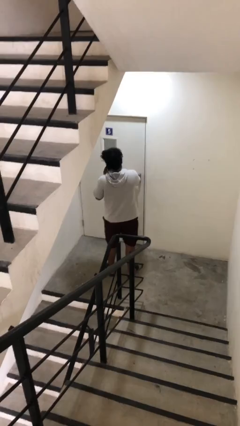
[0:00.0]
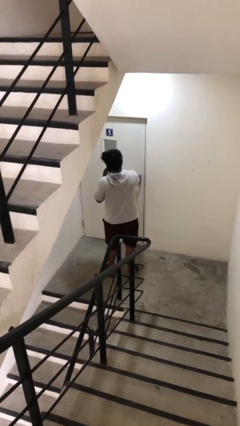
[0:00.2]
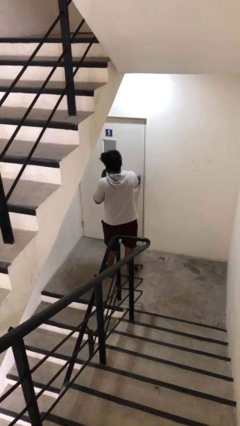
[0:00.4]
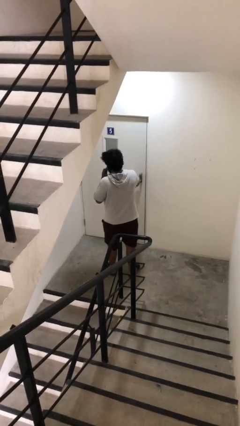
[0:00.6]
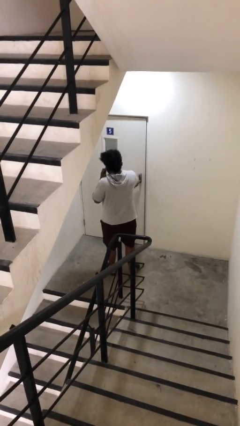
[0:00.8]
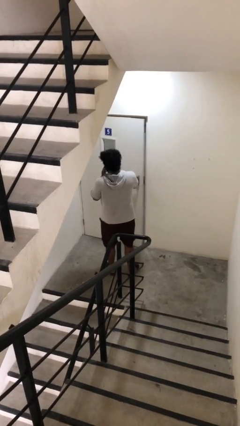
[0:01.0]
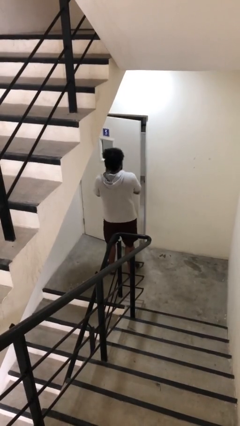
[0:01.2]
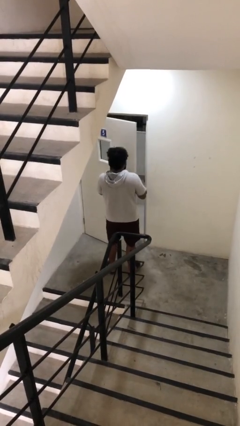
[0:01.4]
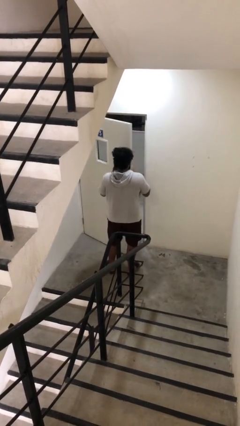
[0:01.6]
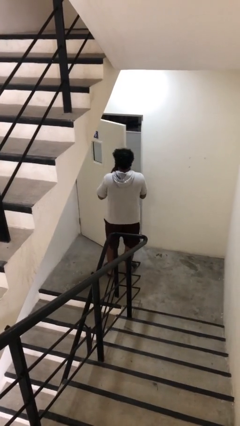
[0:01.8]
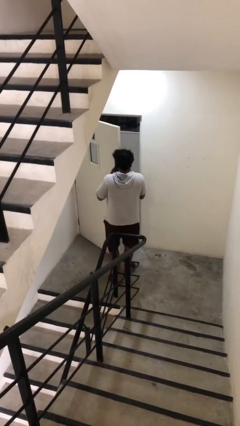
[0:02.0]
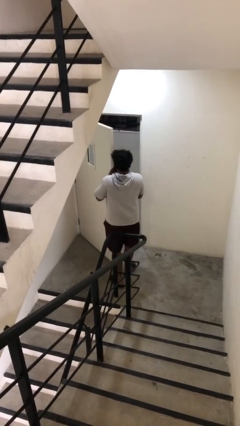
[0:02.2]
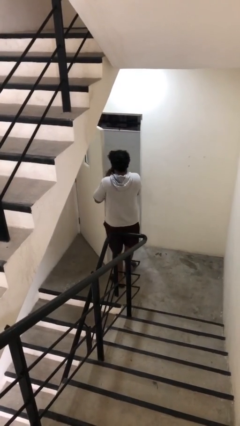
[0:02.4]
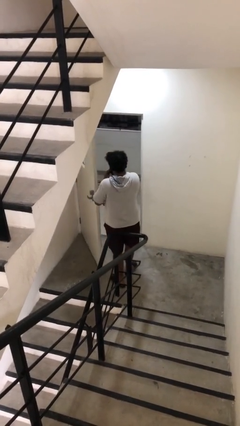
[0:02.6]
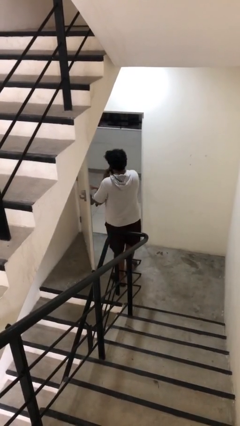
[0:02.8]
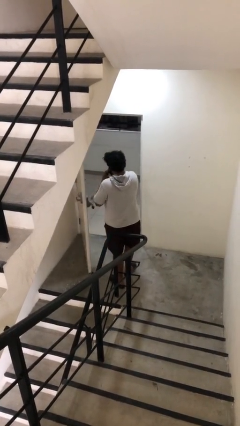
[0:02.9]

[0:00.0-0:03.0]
person opens facility door

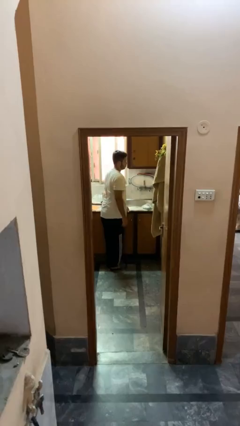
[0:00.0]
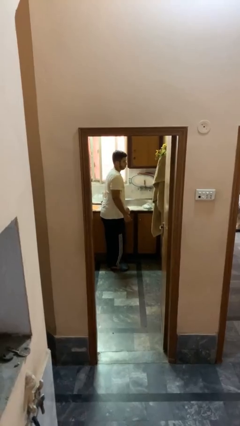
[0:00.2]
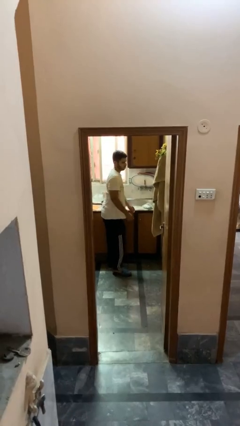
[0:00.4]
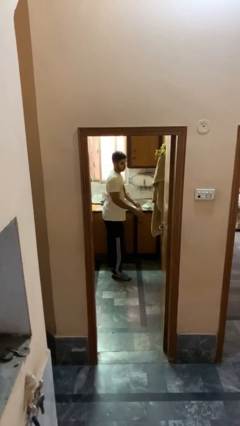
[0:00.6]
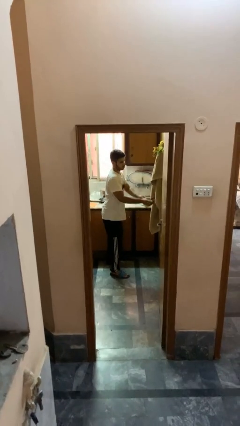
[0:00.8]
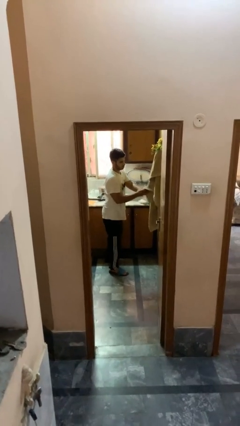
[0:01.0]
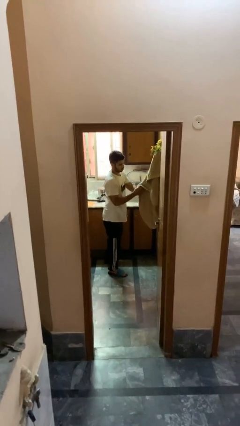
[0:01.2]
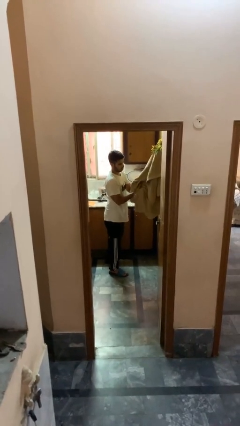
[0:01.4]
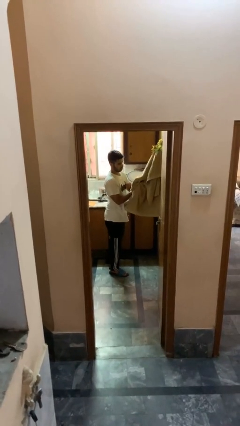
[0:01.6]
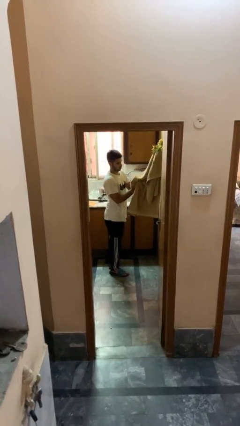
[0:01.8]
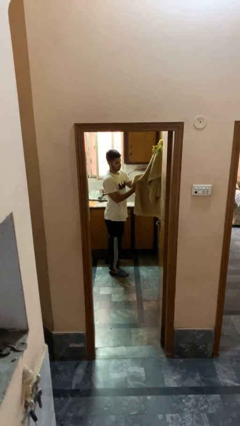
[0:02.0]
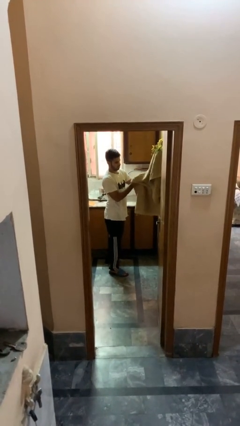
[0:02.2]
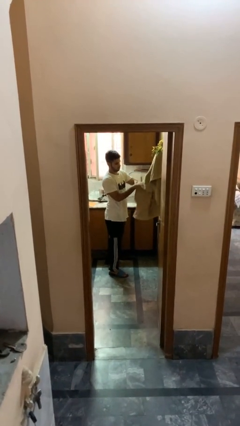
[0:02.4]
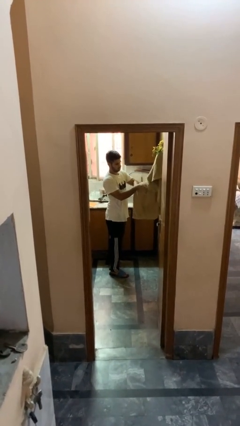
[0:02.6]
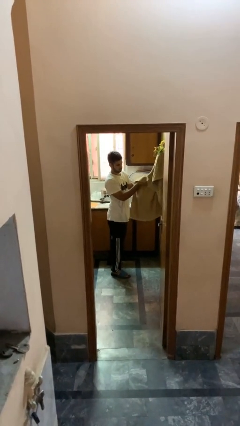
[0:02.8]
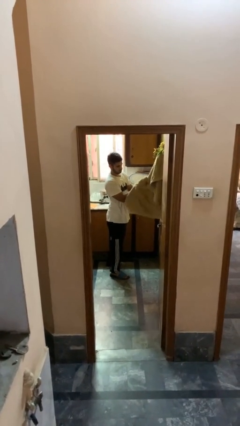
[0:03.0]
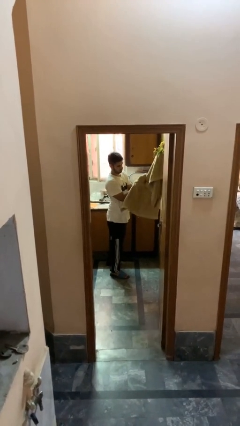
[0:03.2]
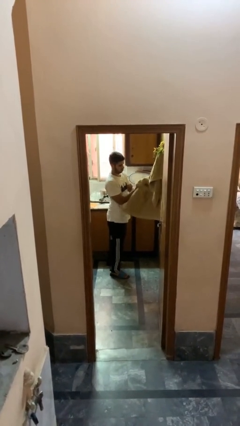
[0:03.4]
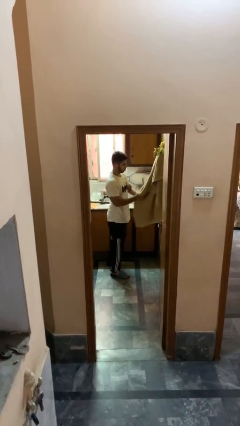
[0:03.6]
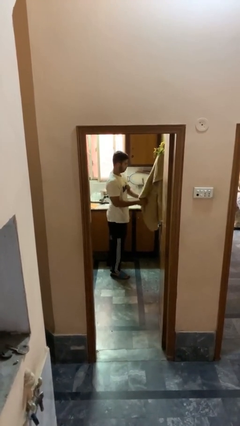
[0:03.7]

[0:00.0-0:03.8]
person dries hands with towel

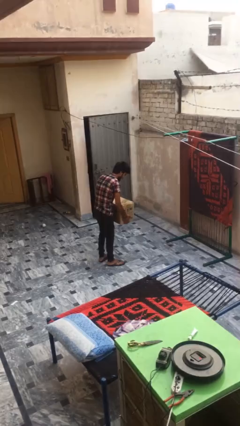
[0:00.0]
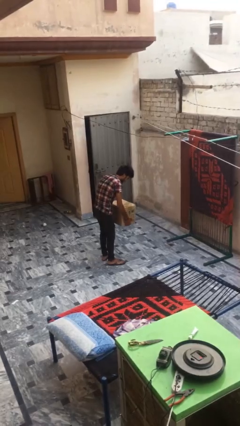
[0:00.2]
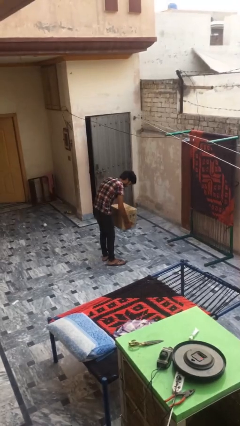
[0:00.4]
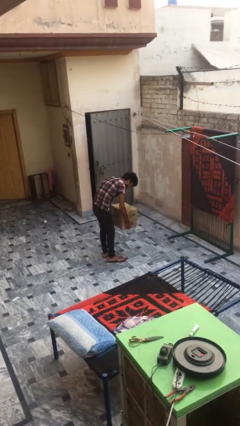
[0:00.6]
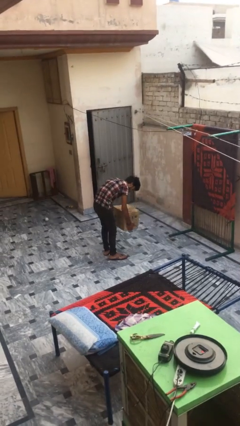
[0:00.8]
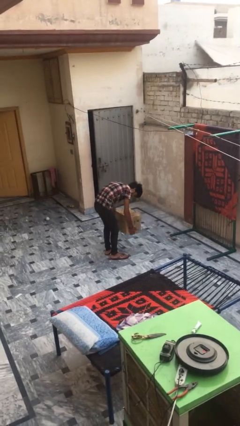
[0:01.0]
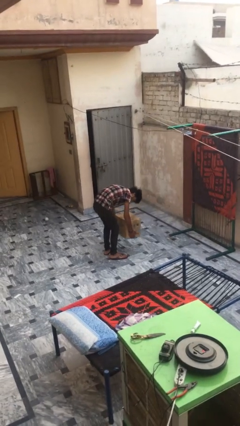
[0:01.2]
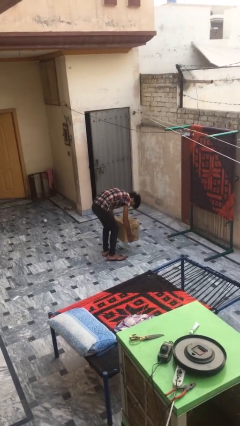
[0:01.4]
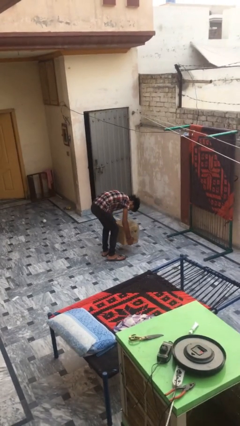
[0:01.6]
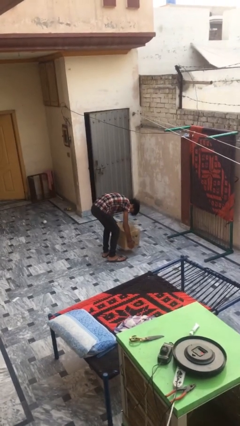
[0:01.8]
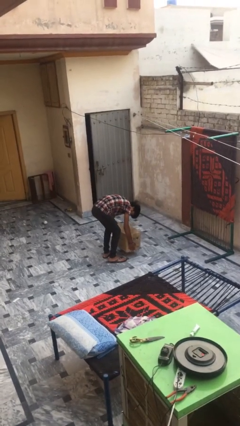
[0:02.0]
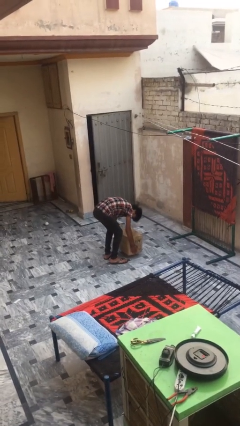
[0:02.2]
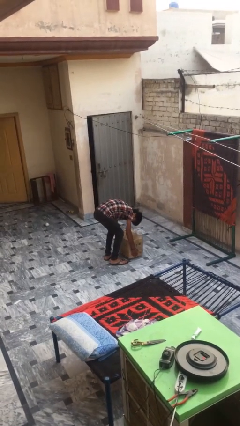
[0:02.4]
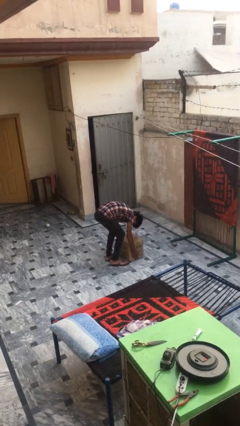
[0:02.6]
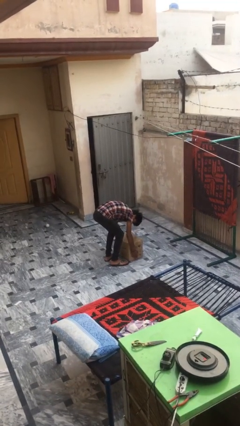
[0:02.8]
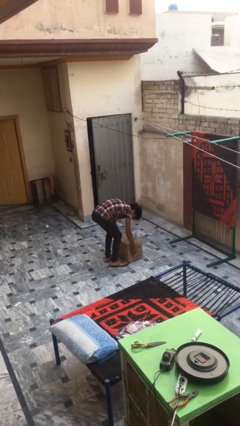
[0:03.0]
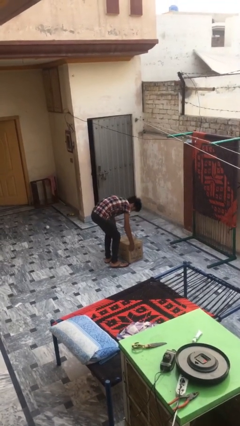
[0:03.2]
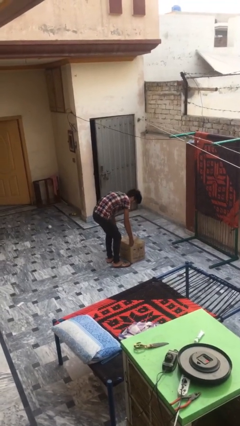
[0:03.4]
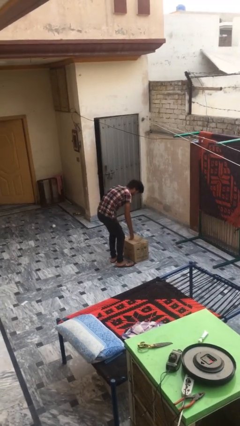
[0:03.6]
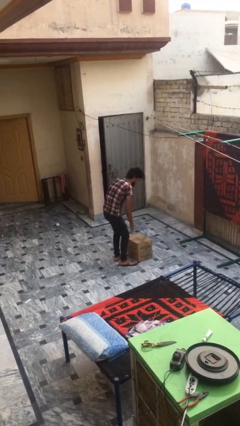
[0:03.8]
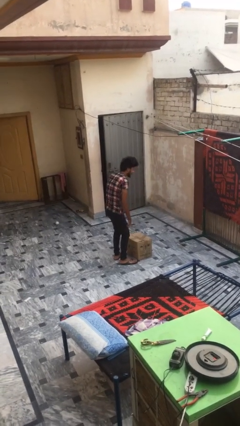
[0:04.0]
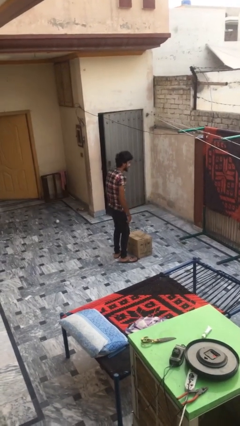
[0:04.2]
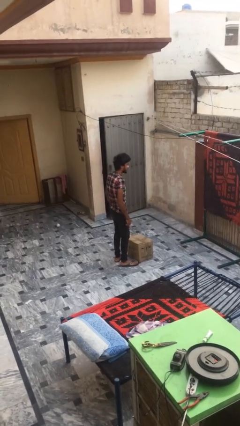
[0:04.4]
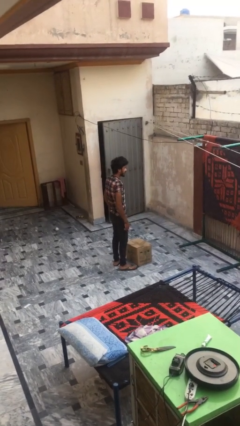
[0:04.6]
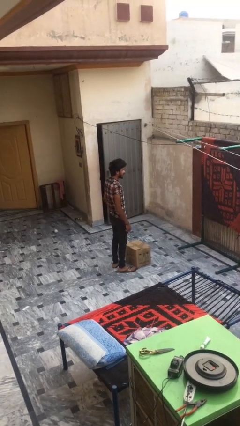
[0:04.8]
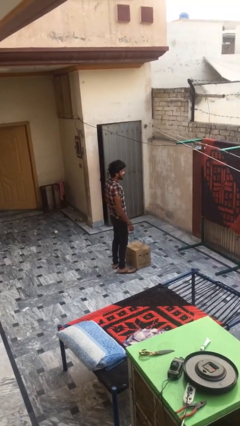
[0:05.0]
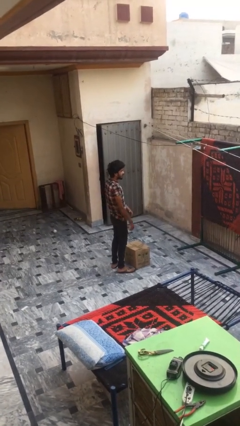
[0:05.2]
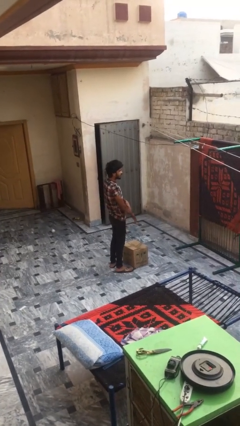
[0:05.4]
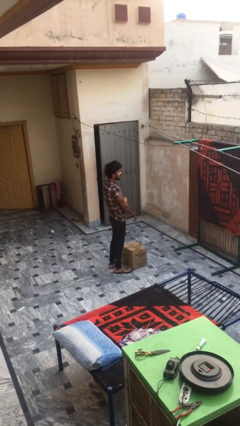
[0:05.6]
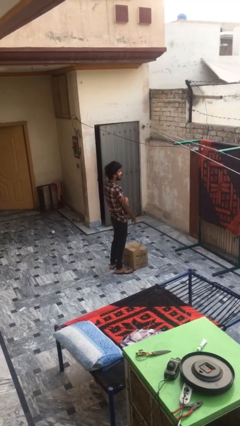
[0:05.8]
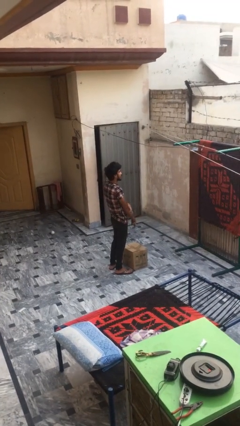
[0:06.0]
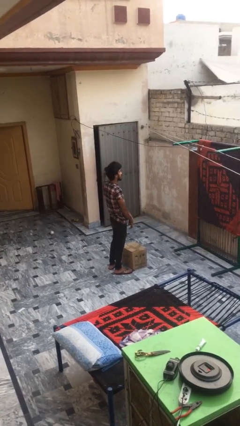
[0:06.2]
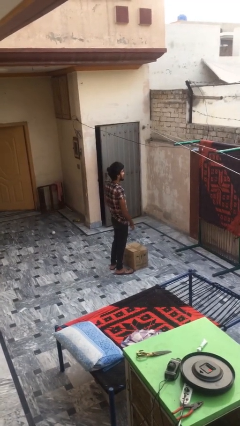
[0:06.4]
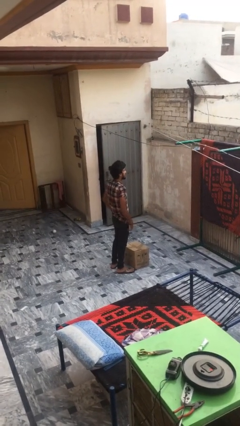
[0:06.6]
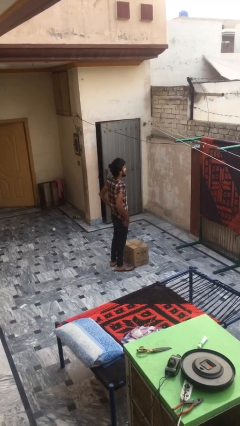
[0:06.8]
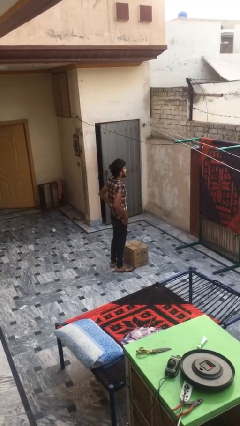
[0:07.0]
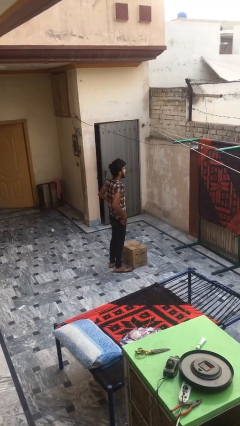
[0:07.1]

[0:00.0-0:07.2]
person puts down object on floor

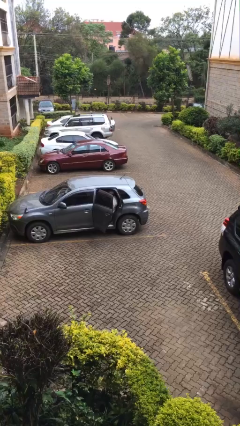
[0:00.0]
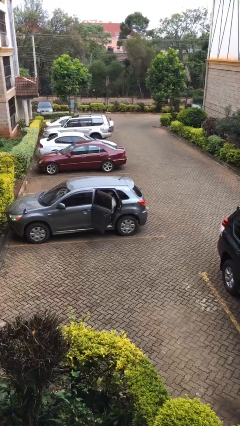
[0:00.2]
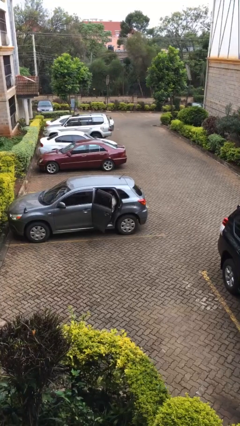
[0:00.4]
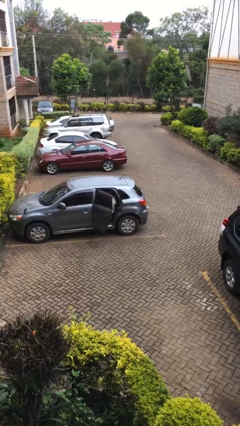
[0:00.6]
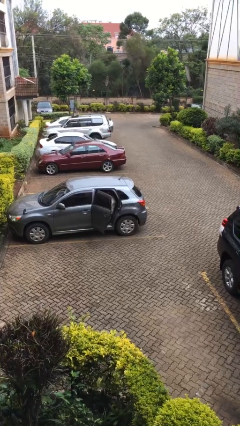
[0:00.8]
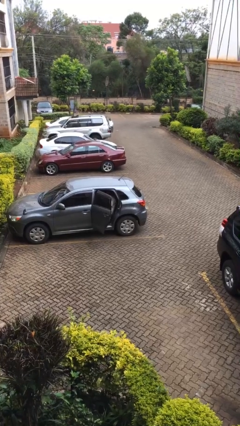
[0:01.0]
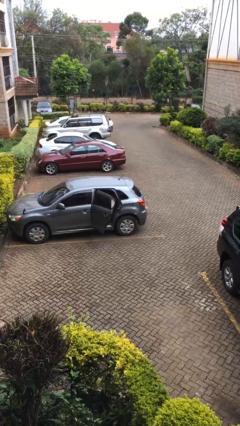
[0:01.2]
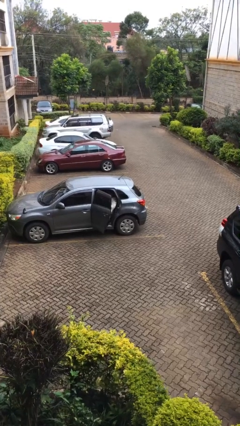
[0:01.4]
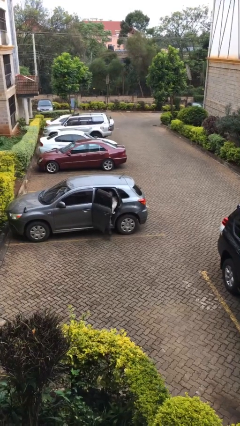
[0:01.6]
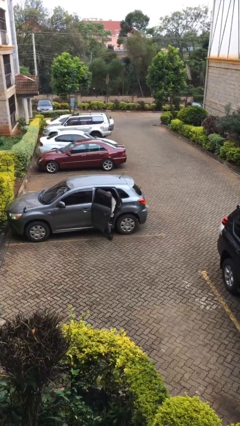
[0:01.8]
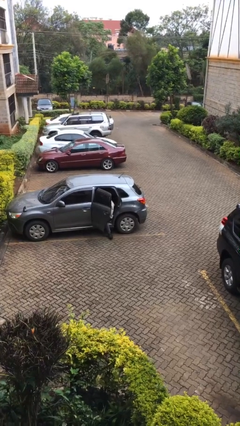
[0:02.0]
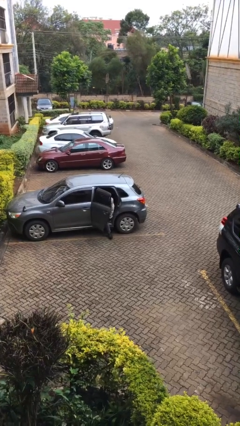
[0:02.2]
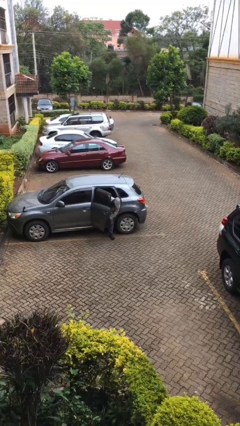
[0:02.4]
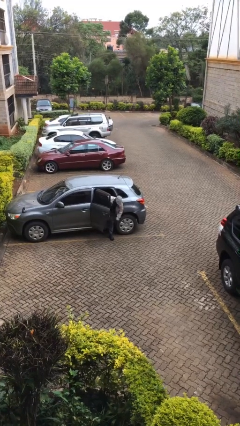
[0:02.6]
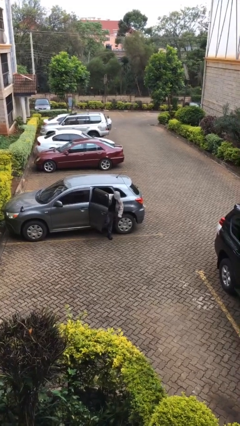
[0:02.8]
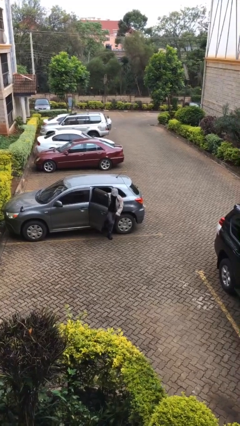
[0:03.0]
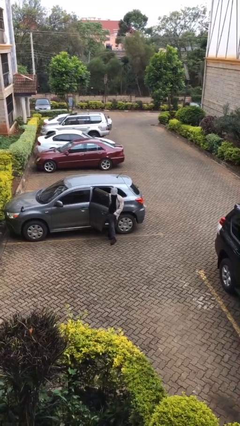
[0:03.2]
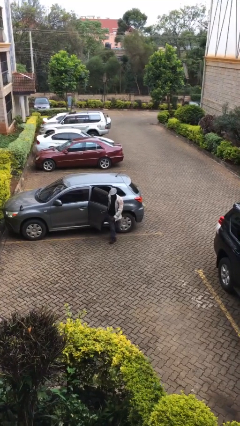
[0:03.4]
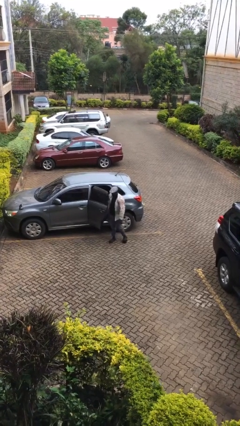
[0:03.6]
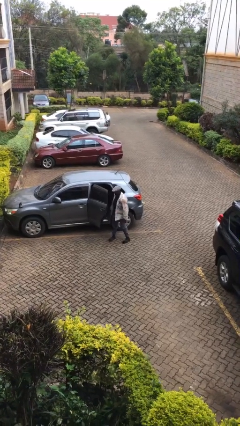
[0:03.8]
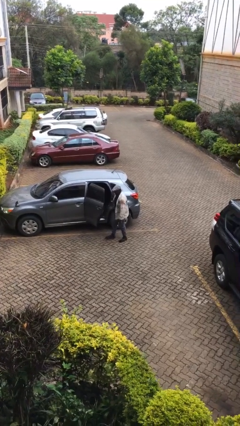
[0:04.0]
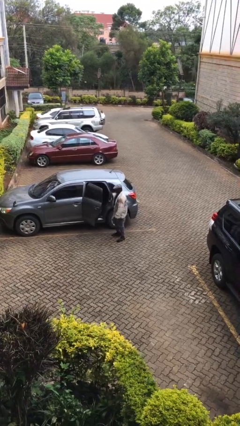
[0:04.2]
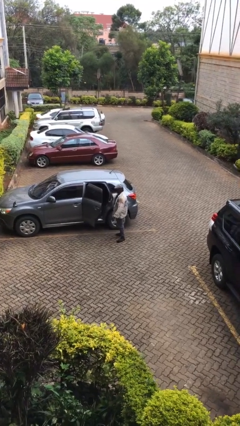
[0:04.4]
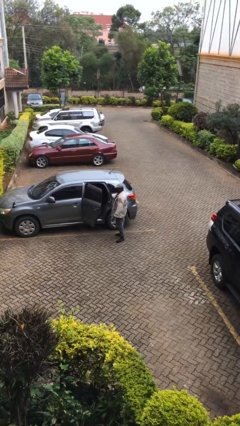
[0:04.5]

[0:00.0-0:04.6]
person exits car
